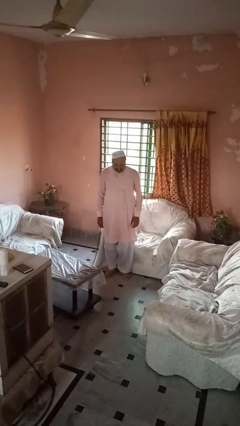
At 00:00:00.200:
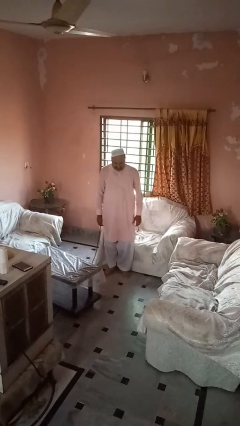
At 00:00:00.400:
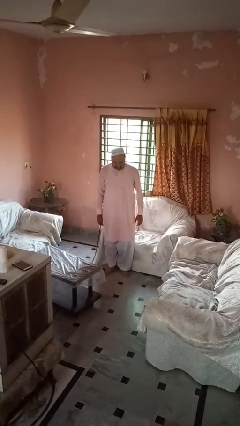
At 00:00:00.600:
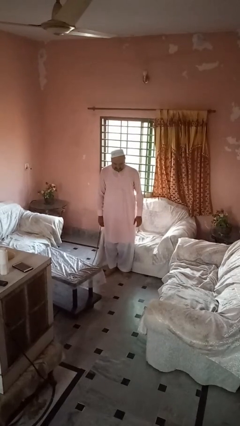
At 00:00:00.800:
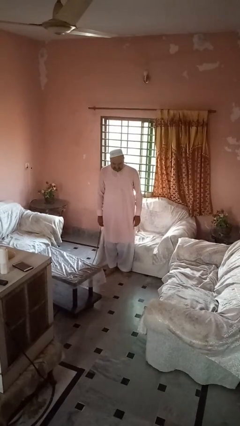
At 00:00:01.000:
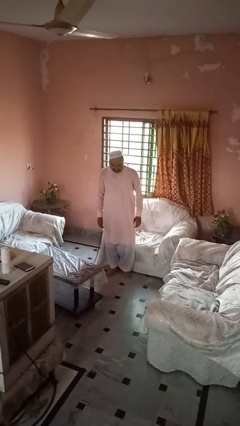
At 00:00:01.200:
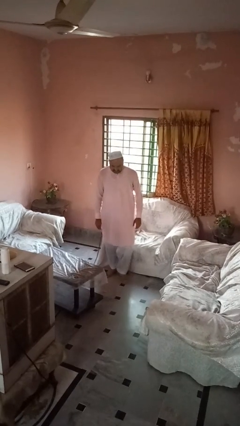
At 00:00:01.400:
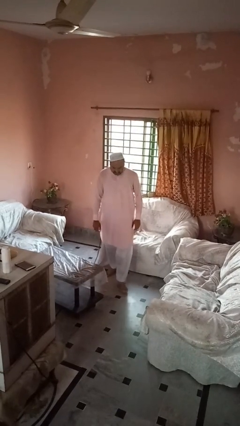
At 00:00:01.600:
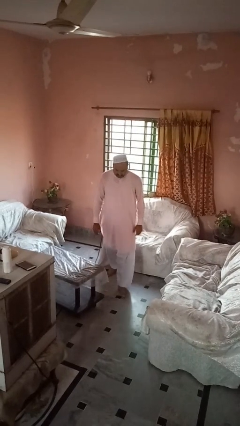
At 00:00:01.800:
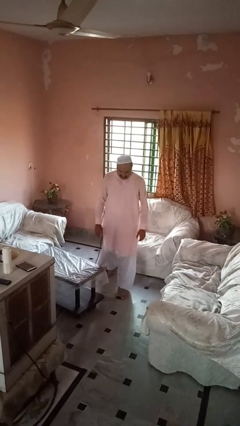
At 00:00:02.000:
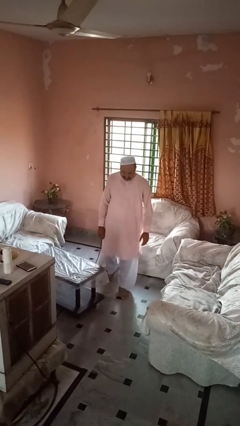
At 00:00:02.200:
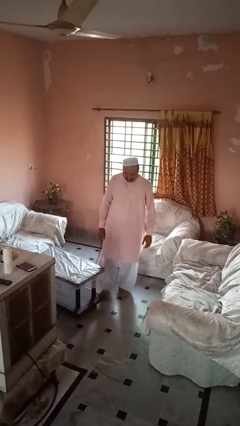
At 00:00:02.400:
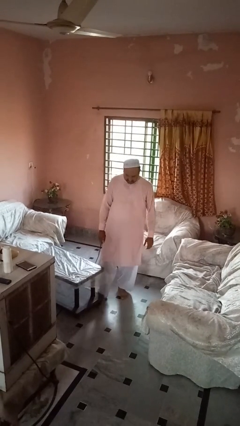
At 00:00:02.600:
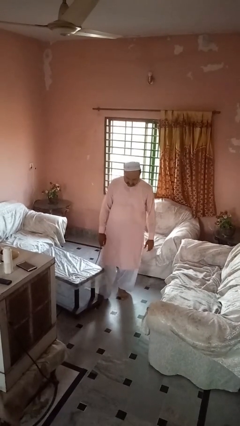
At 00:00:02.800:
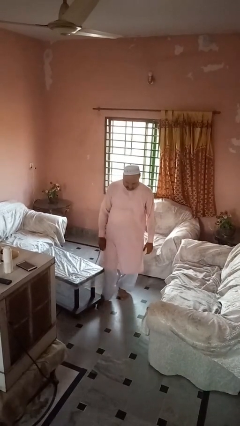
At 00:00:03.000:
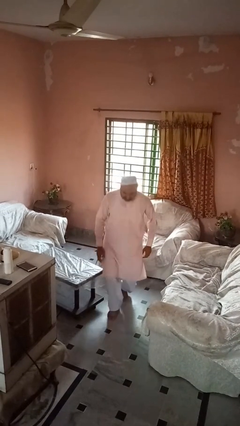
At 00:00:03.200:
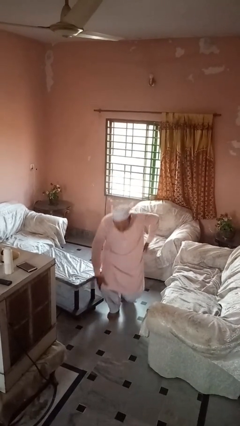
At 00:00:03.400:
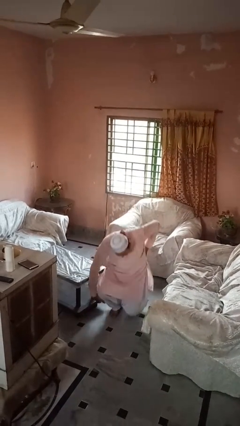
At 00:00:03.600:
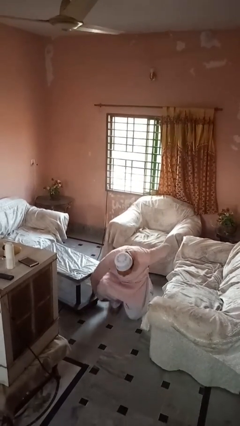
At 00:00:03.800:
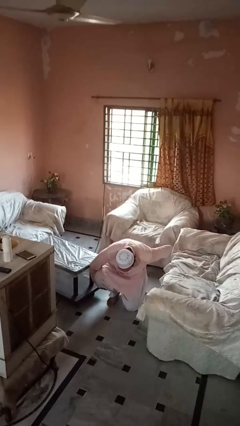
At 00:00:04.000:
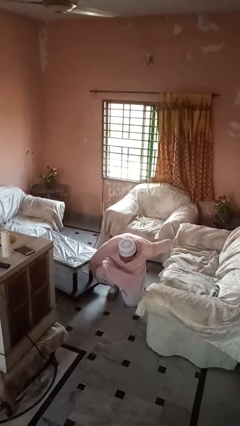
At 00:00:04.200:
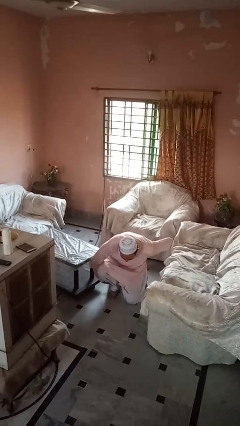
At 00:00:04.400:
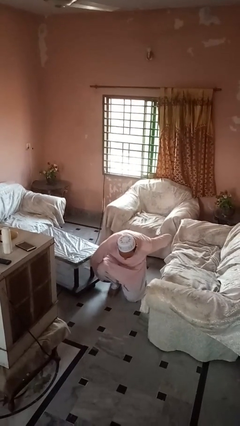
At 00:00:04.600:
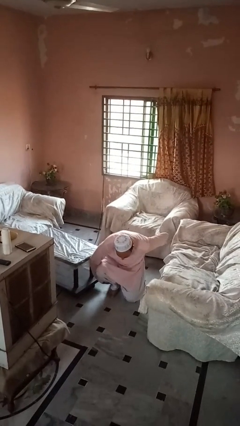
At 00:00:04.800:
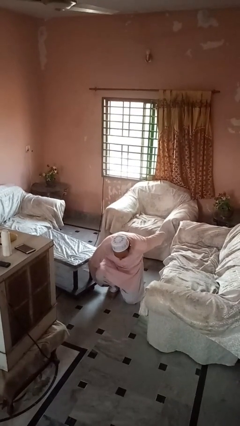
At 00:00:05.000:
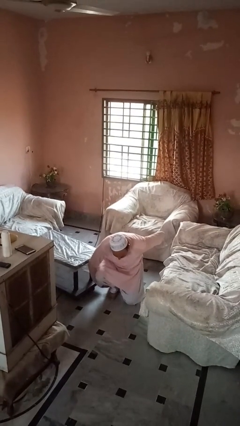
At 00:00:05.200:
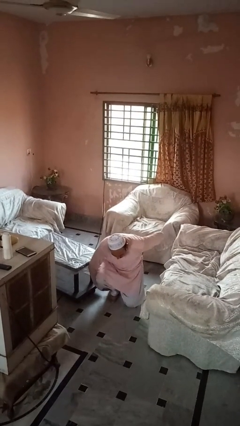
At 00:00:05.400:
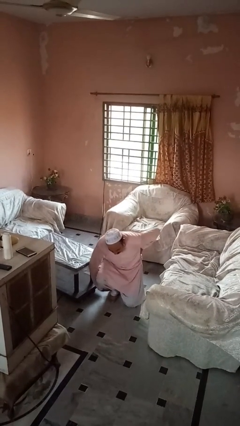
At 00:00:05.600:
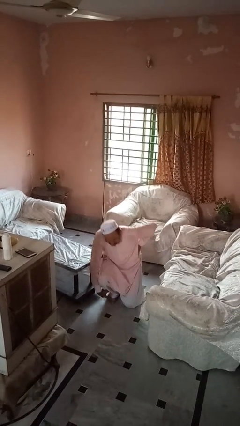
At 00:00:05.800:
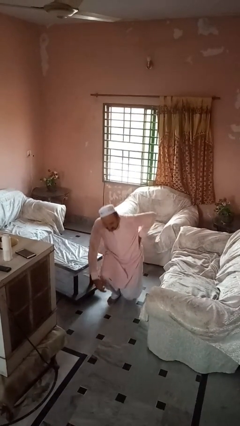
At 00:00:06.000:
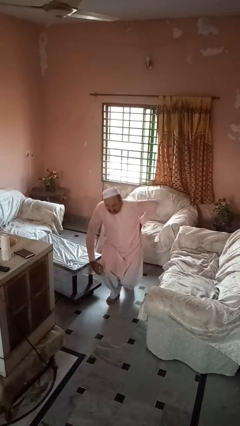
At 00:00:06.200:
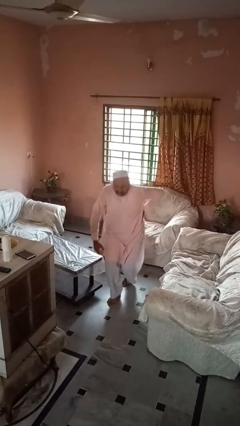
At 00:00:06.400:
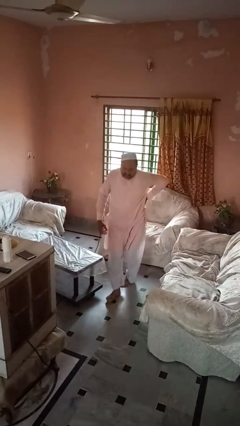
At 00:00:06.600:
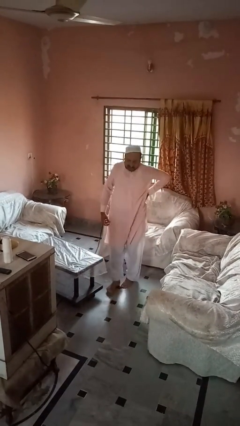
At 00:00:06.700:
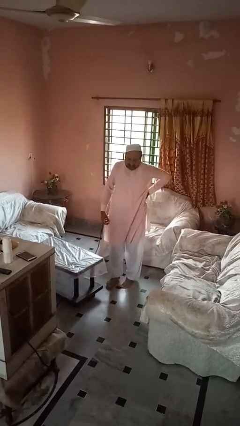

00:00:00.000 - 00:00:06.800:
person bumps into table

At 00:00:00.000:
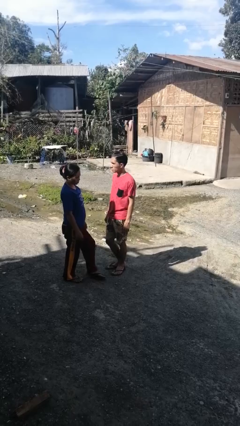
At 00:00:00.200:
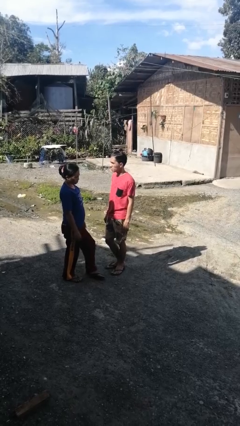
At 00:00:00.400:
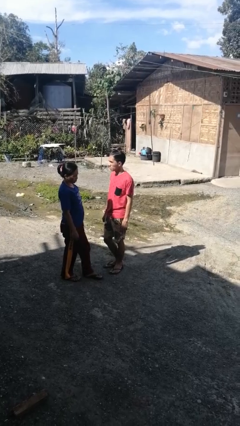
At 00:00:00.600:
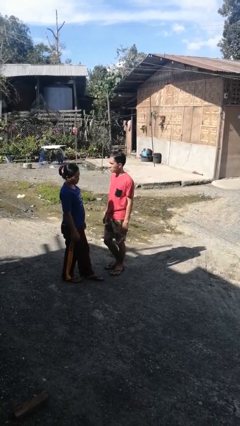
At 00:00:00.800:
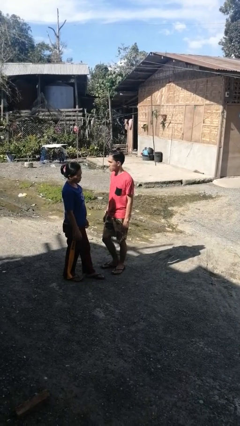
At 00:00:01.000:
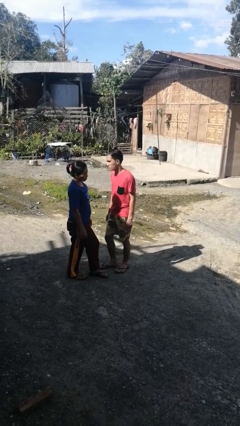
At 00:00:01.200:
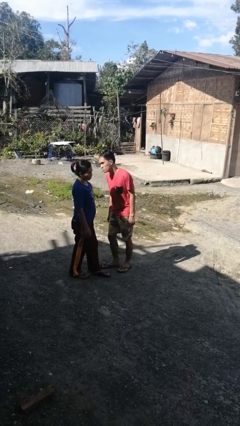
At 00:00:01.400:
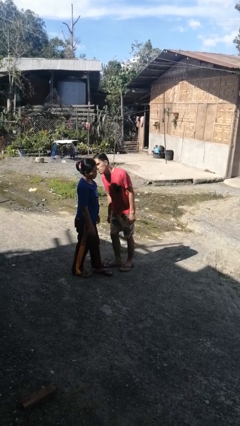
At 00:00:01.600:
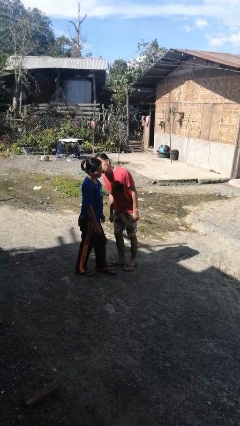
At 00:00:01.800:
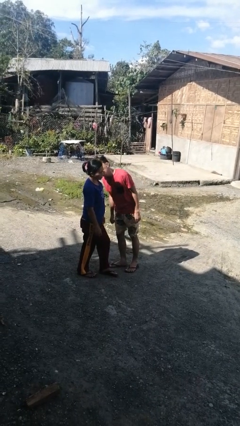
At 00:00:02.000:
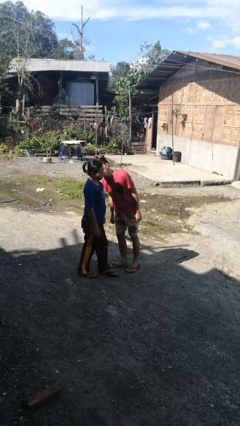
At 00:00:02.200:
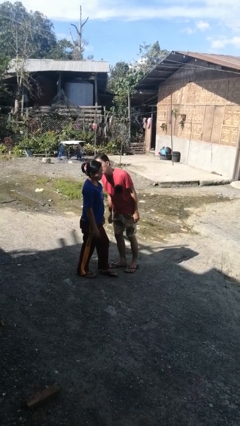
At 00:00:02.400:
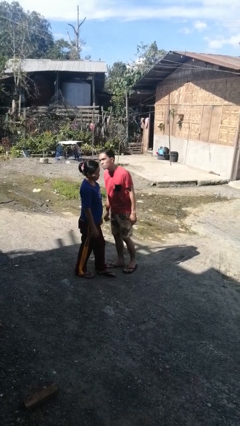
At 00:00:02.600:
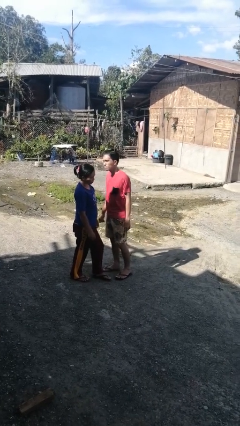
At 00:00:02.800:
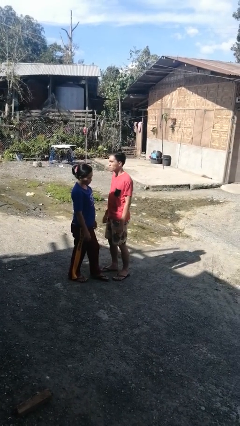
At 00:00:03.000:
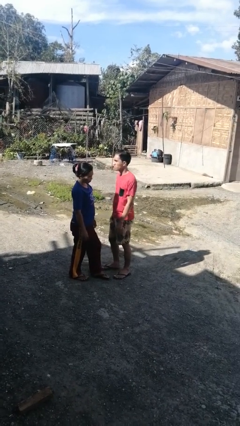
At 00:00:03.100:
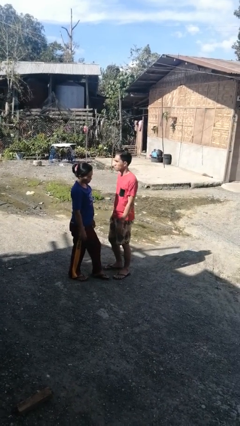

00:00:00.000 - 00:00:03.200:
person kisses cheek of person

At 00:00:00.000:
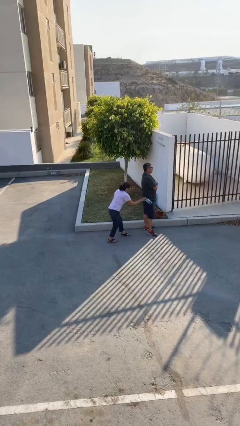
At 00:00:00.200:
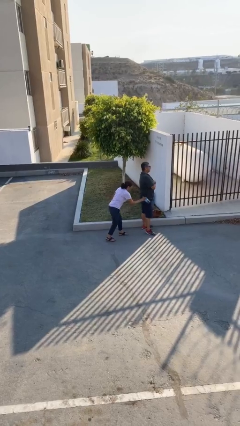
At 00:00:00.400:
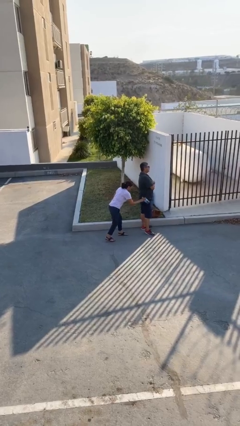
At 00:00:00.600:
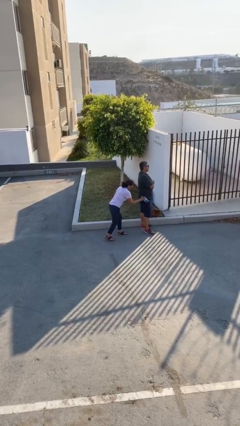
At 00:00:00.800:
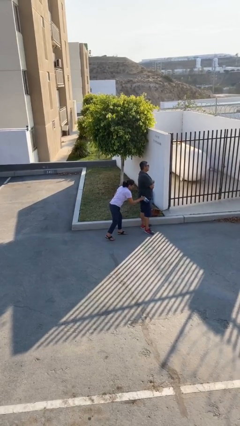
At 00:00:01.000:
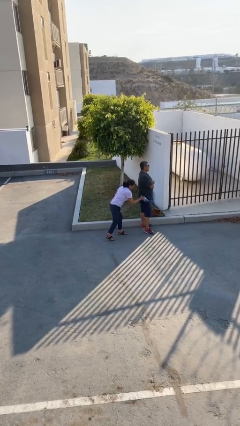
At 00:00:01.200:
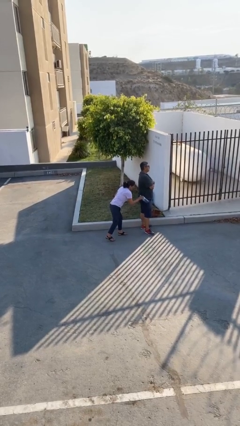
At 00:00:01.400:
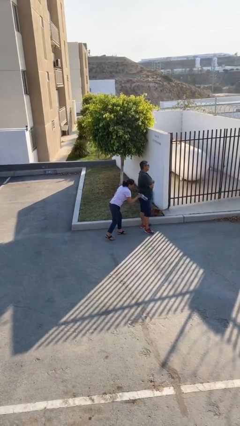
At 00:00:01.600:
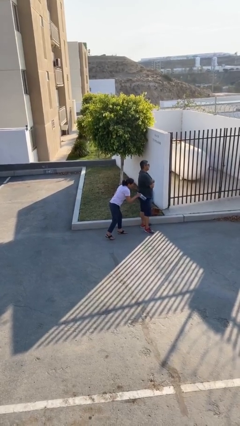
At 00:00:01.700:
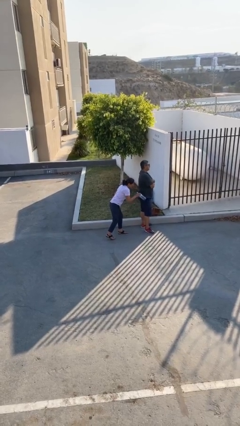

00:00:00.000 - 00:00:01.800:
person steals object from person

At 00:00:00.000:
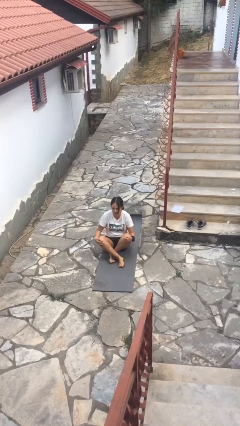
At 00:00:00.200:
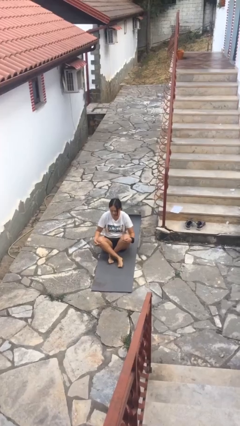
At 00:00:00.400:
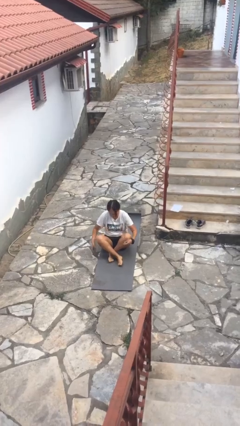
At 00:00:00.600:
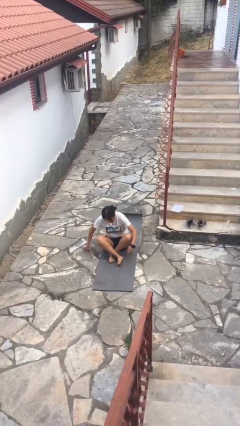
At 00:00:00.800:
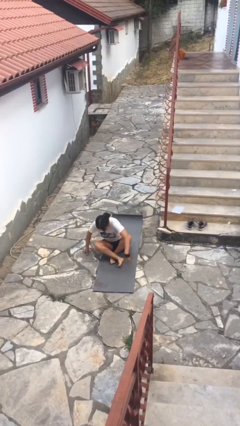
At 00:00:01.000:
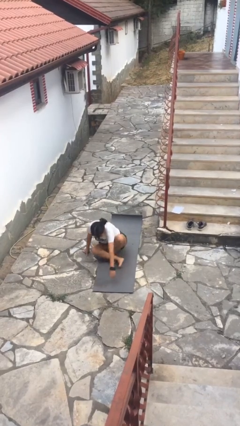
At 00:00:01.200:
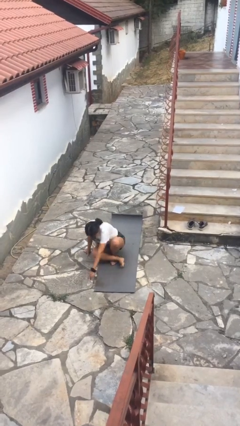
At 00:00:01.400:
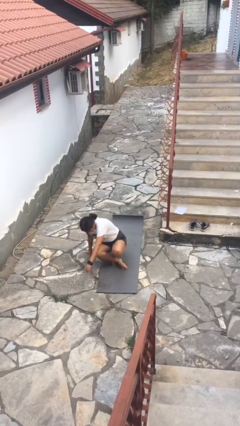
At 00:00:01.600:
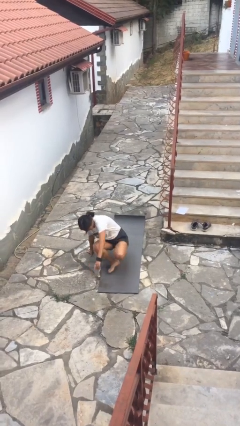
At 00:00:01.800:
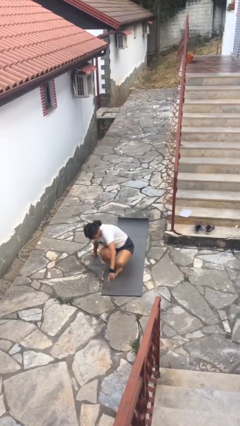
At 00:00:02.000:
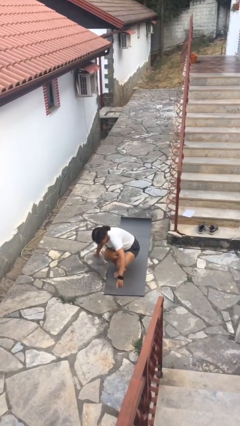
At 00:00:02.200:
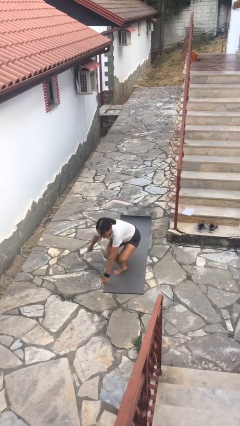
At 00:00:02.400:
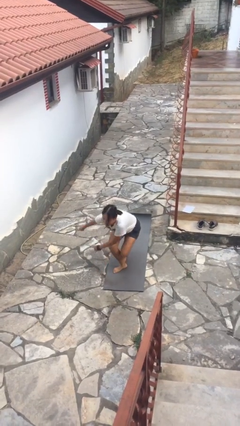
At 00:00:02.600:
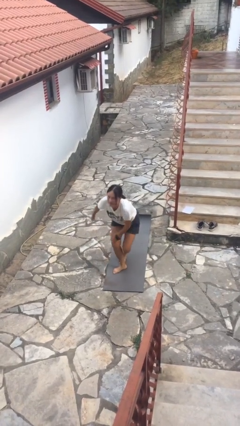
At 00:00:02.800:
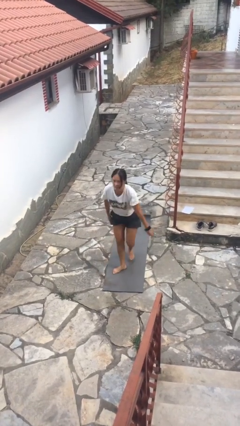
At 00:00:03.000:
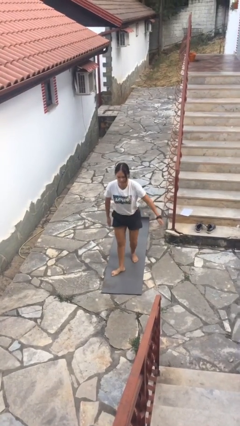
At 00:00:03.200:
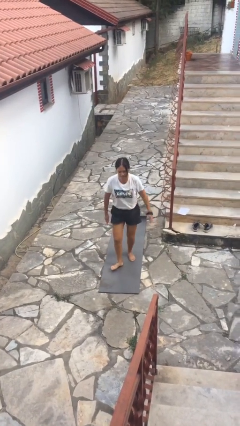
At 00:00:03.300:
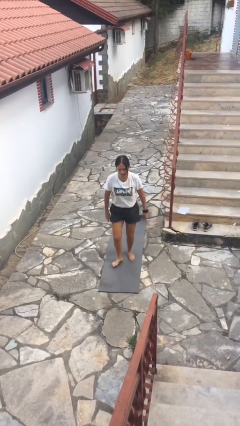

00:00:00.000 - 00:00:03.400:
person stands up from floor

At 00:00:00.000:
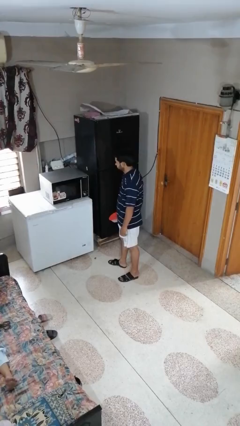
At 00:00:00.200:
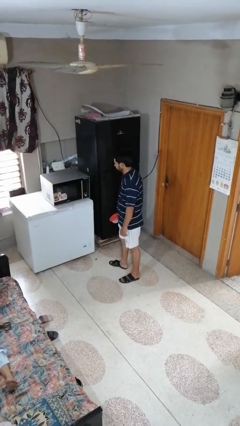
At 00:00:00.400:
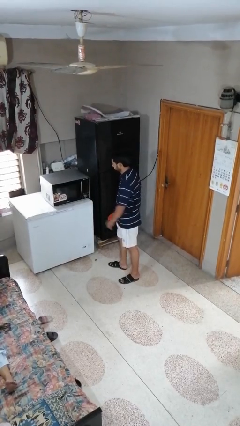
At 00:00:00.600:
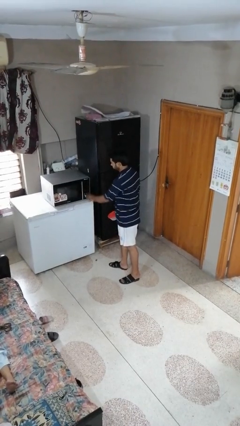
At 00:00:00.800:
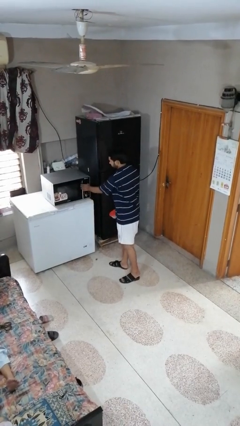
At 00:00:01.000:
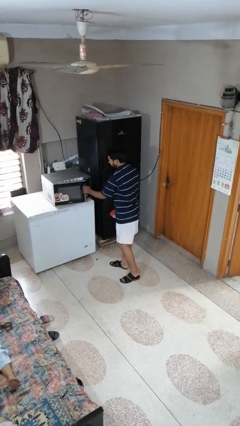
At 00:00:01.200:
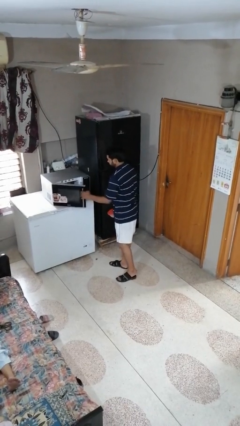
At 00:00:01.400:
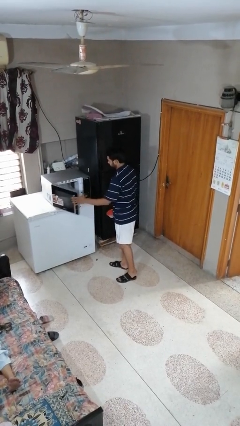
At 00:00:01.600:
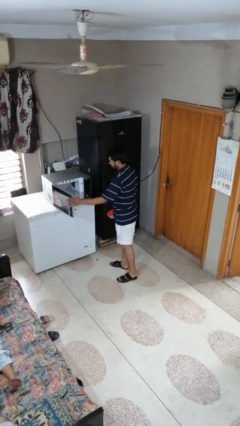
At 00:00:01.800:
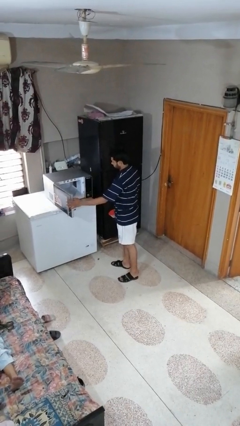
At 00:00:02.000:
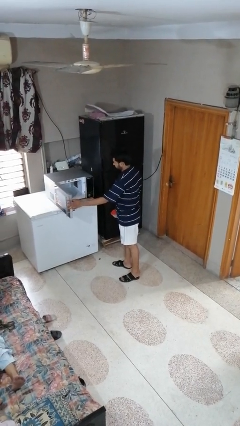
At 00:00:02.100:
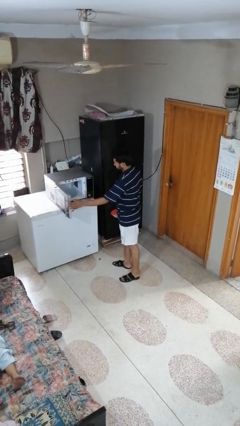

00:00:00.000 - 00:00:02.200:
person opens microwave
